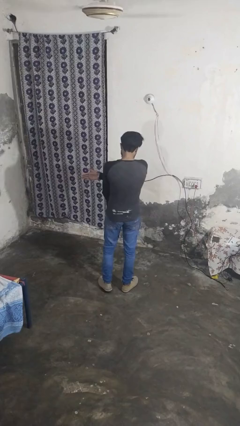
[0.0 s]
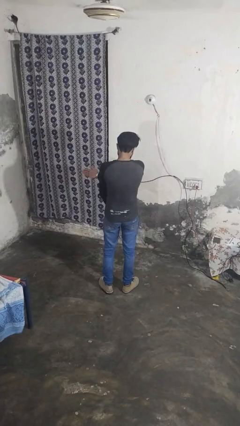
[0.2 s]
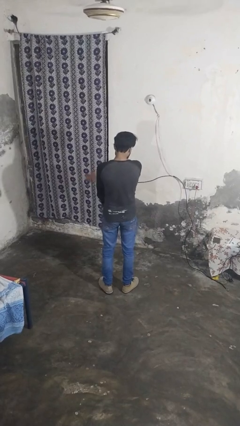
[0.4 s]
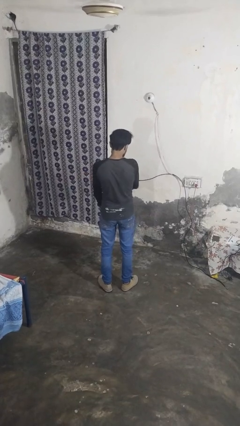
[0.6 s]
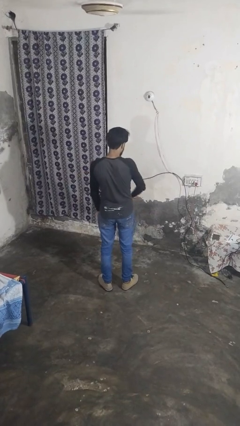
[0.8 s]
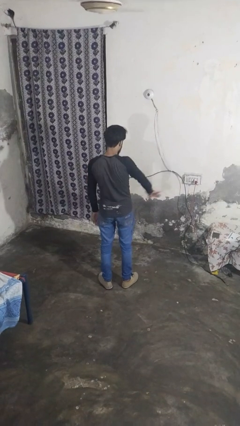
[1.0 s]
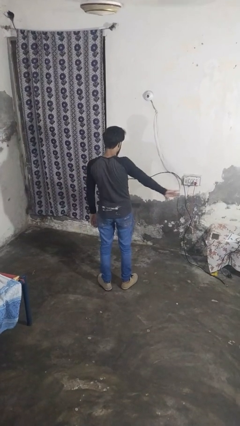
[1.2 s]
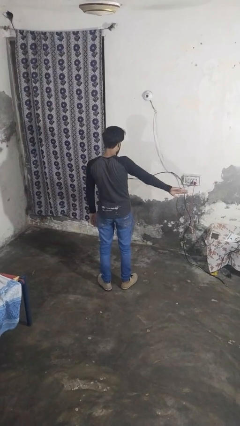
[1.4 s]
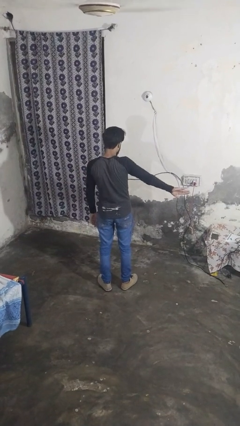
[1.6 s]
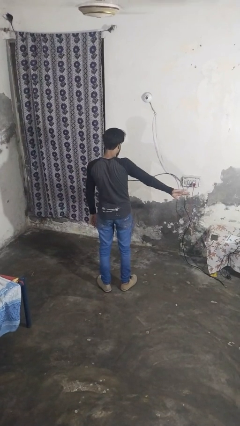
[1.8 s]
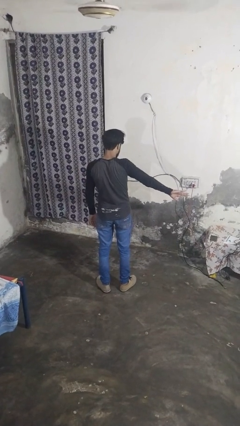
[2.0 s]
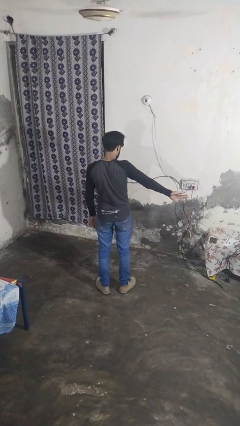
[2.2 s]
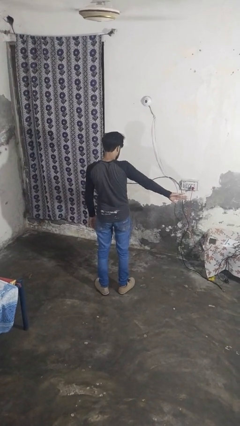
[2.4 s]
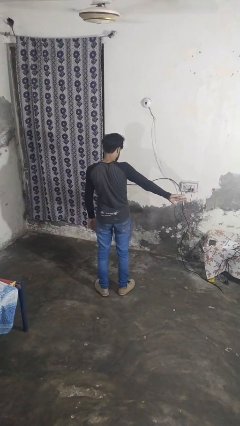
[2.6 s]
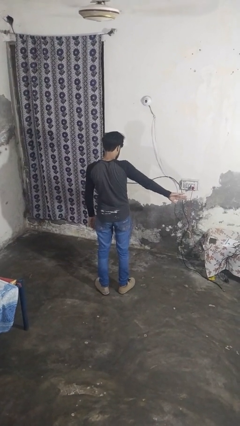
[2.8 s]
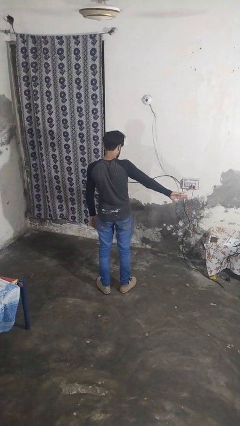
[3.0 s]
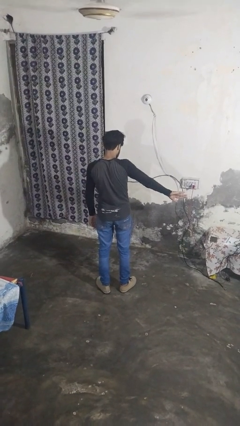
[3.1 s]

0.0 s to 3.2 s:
person gestures swipe right

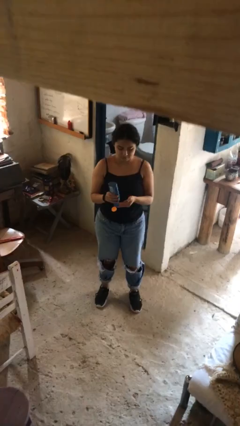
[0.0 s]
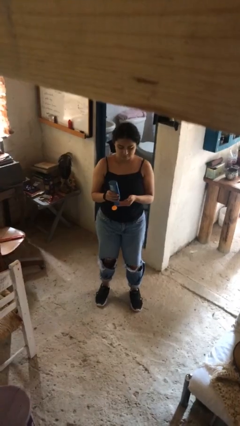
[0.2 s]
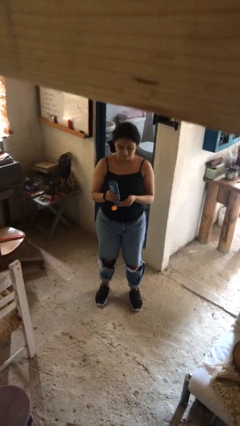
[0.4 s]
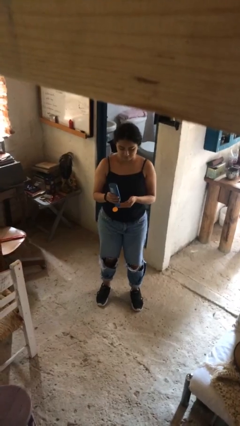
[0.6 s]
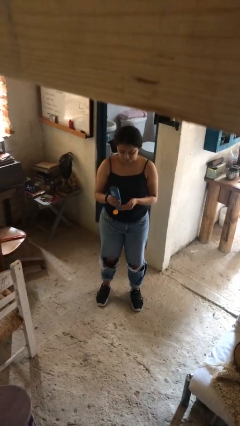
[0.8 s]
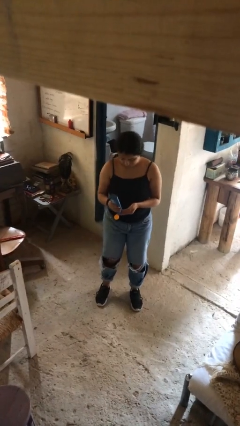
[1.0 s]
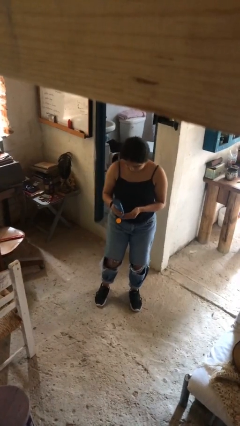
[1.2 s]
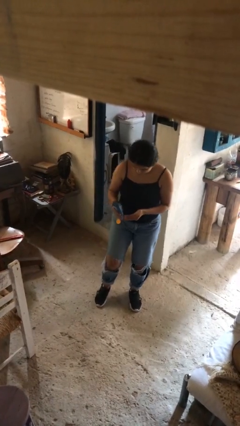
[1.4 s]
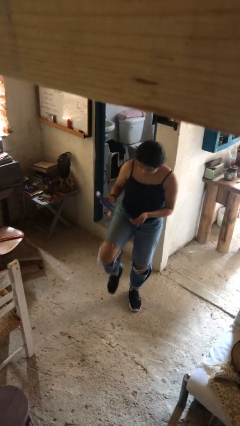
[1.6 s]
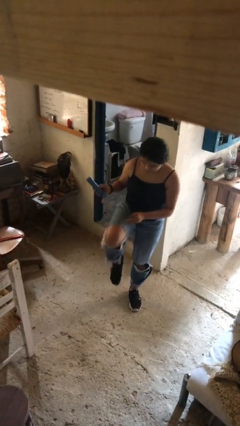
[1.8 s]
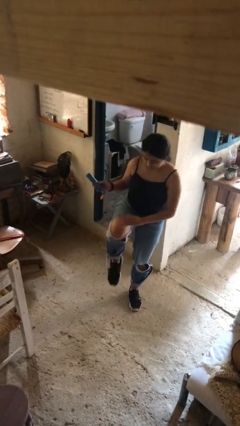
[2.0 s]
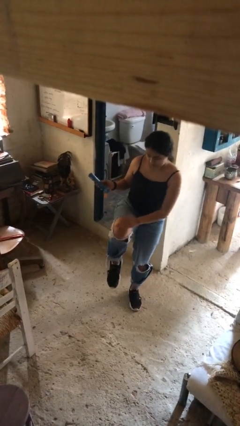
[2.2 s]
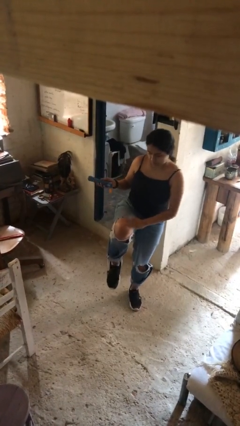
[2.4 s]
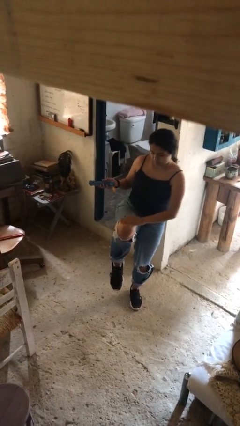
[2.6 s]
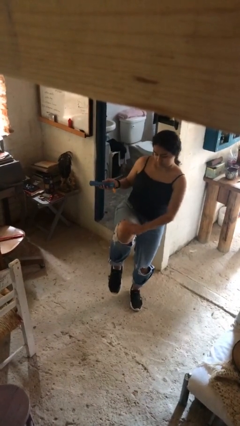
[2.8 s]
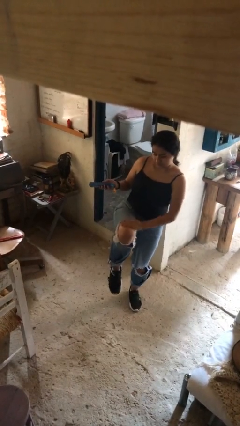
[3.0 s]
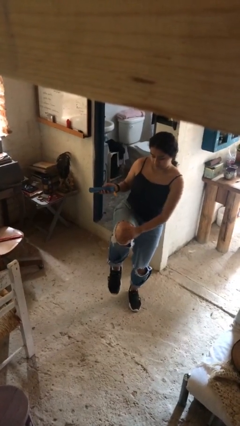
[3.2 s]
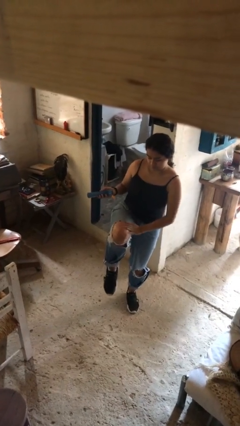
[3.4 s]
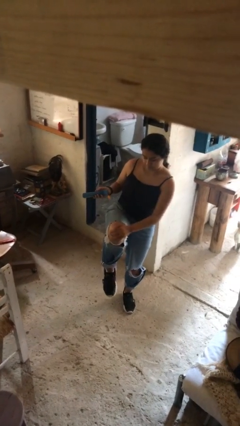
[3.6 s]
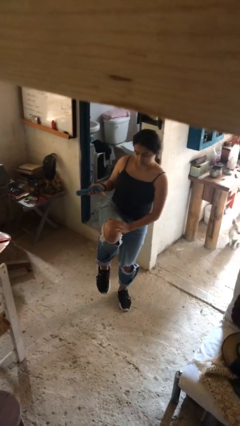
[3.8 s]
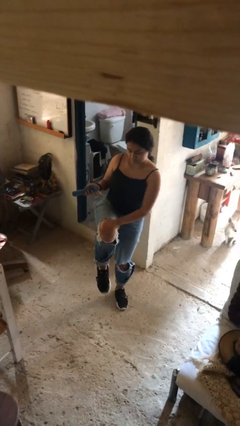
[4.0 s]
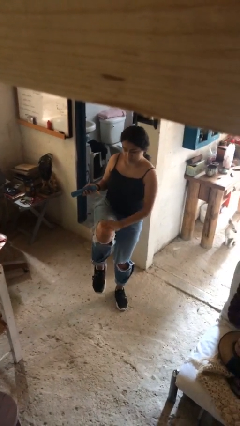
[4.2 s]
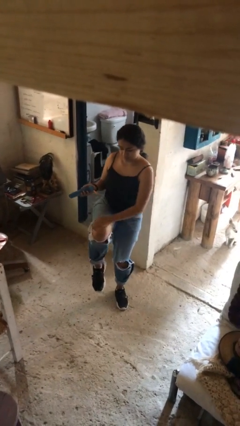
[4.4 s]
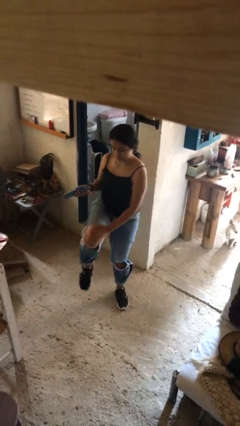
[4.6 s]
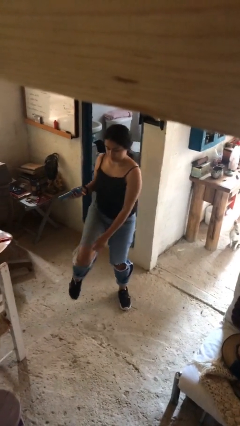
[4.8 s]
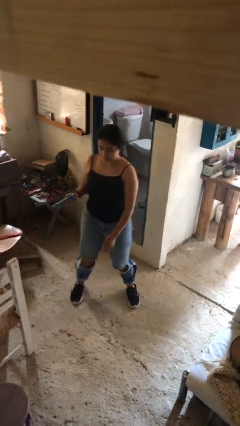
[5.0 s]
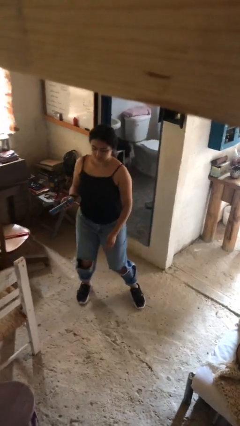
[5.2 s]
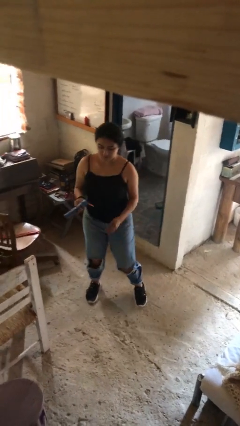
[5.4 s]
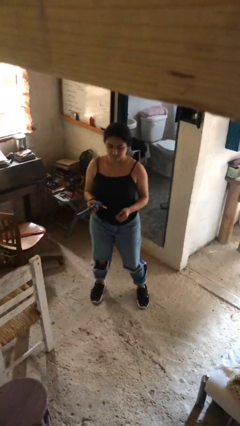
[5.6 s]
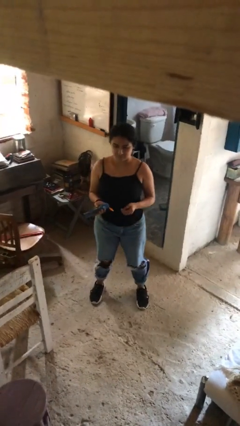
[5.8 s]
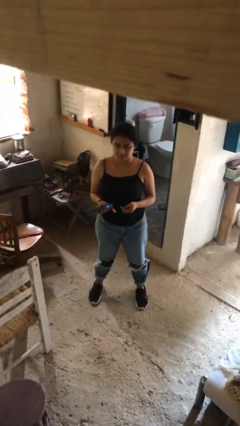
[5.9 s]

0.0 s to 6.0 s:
person applies sunscreen

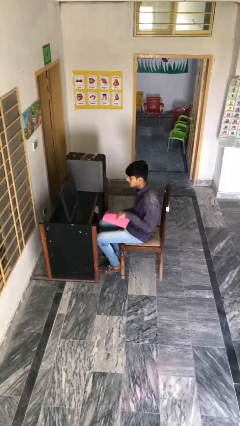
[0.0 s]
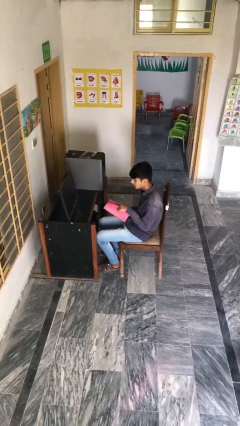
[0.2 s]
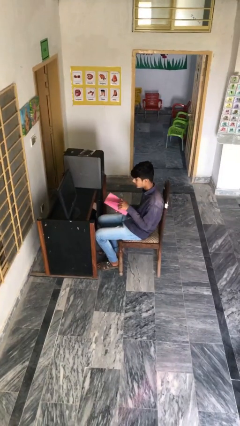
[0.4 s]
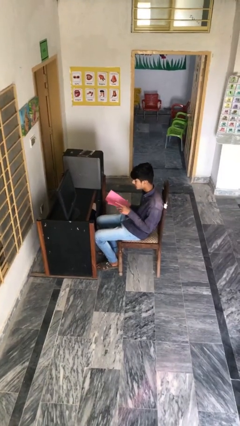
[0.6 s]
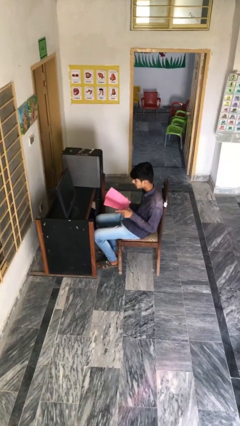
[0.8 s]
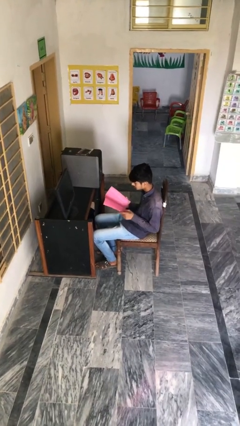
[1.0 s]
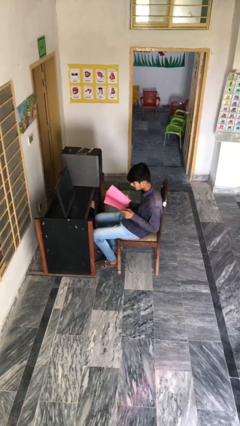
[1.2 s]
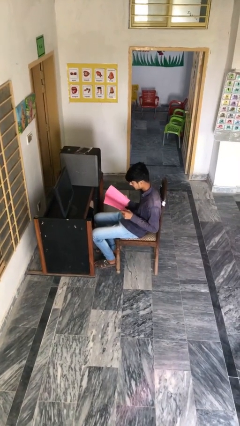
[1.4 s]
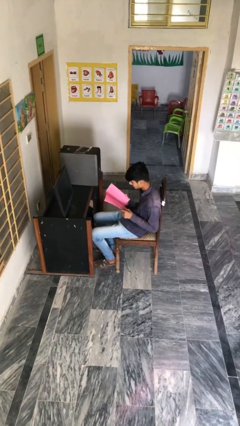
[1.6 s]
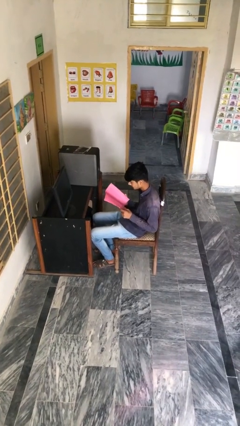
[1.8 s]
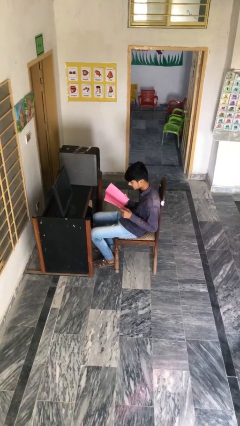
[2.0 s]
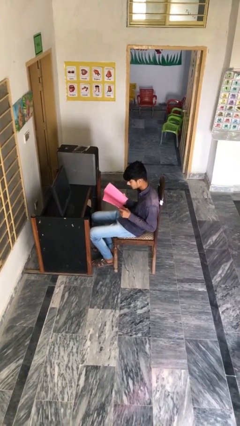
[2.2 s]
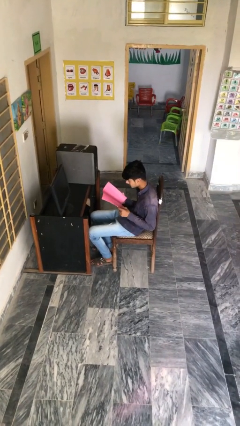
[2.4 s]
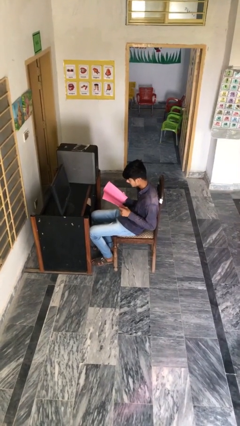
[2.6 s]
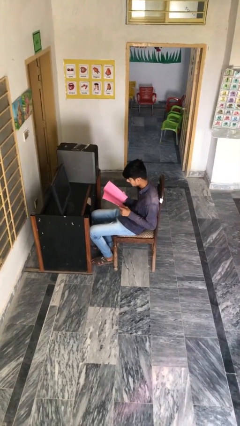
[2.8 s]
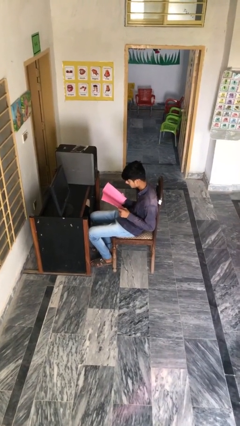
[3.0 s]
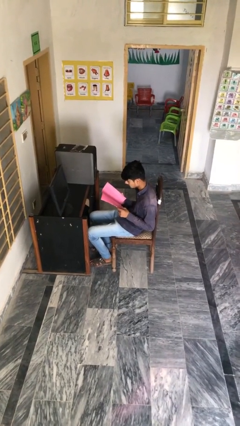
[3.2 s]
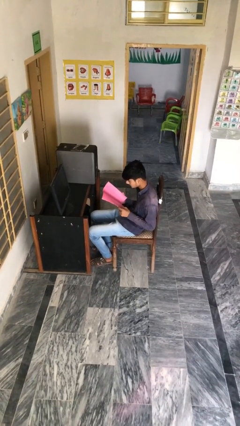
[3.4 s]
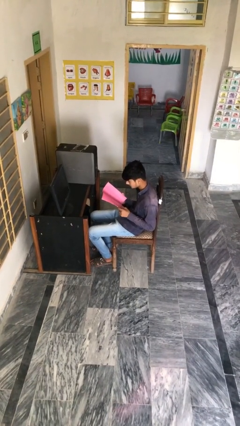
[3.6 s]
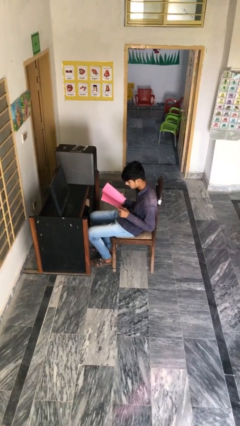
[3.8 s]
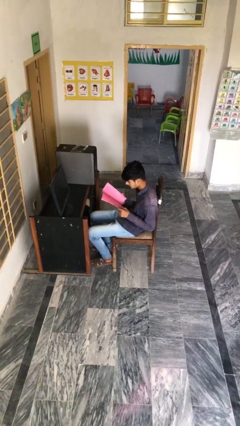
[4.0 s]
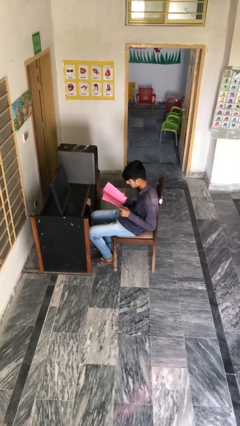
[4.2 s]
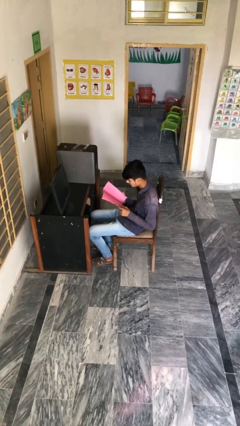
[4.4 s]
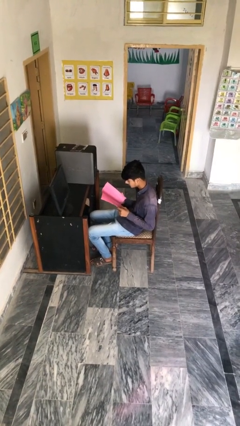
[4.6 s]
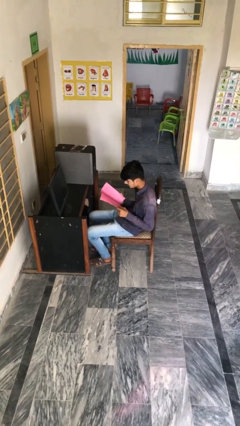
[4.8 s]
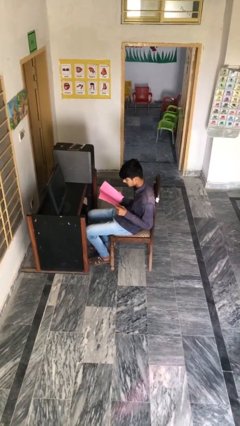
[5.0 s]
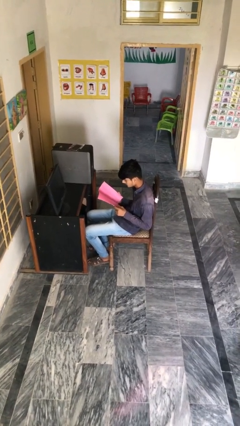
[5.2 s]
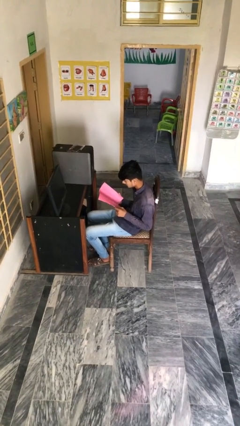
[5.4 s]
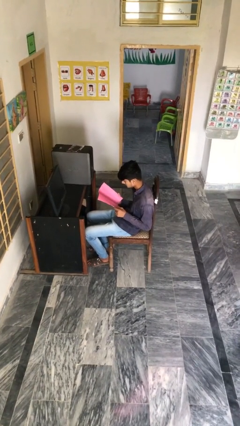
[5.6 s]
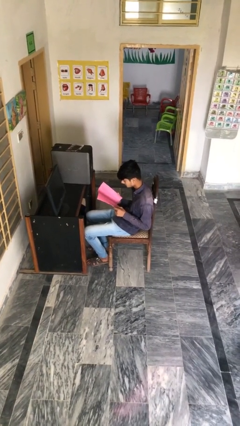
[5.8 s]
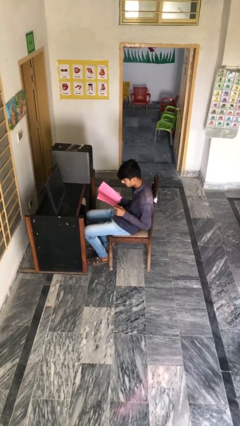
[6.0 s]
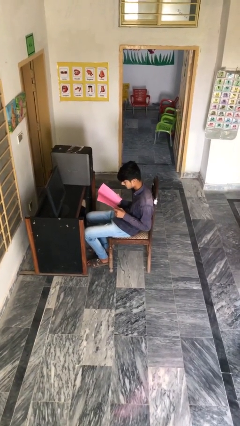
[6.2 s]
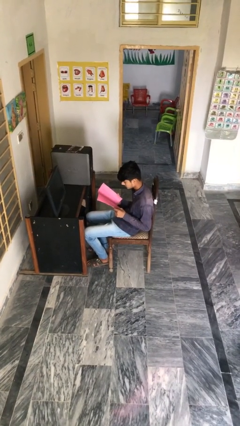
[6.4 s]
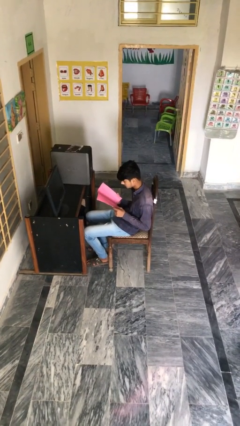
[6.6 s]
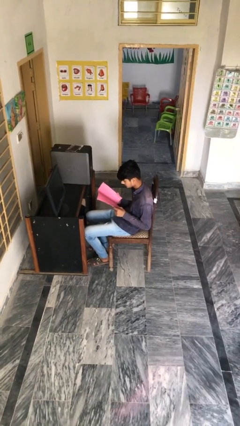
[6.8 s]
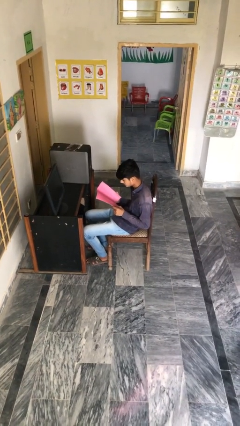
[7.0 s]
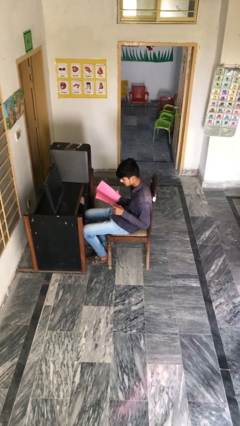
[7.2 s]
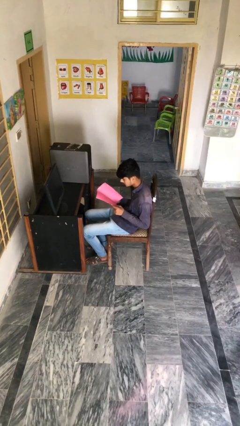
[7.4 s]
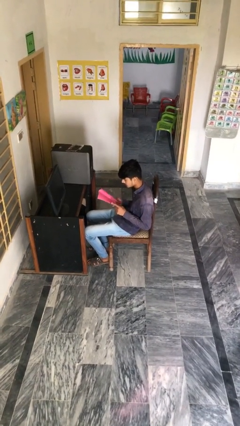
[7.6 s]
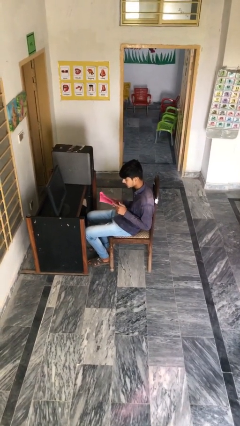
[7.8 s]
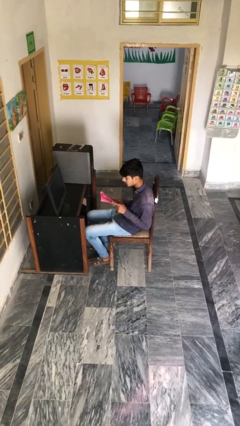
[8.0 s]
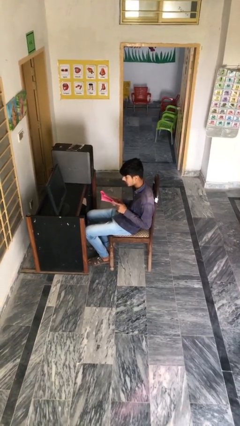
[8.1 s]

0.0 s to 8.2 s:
person reads document

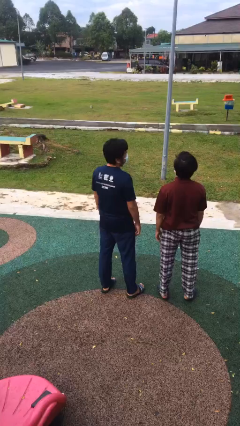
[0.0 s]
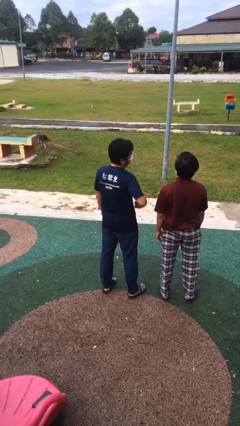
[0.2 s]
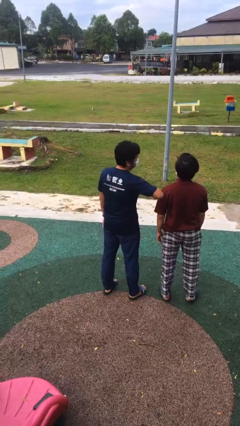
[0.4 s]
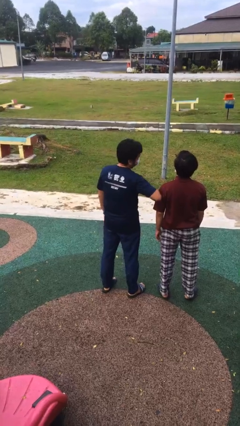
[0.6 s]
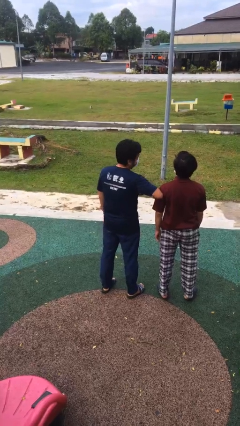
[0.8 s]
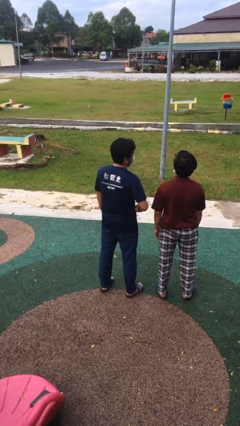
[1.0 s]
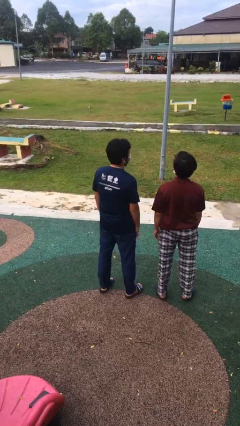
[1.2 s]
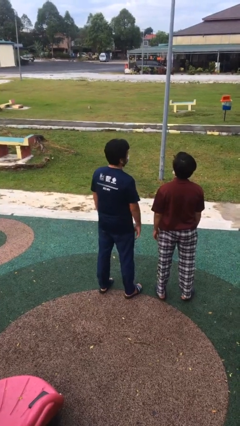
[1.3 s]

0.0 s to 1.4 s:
person nudges person with elbow
